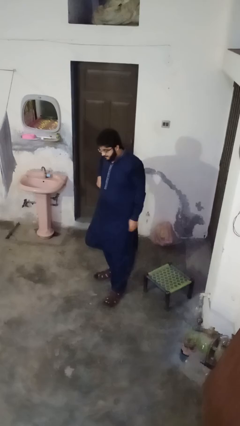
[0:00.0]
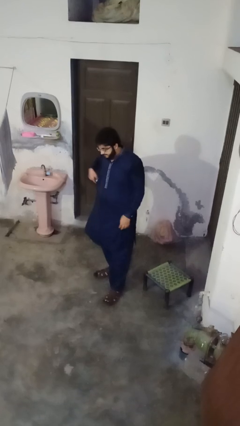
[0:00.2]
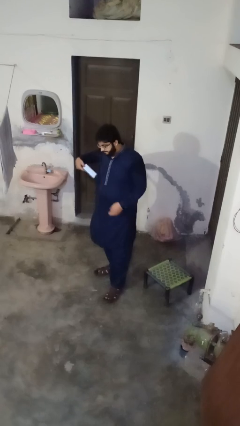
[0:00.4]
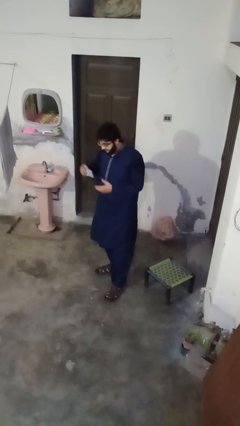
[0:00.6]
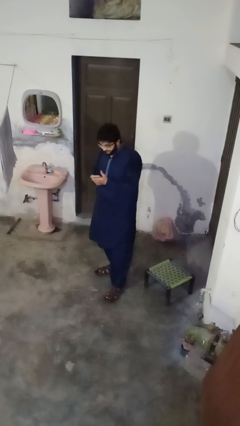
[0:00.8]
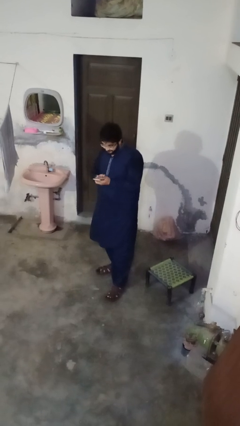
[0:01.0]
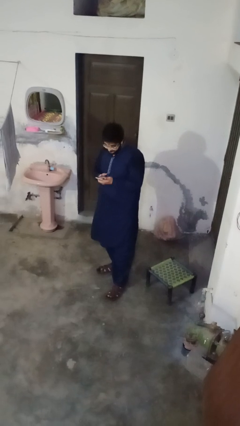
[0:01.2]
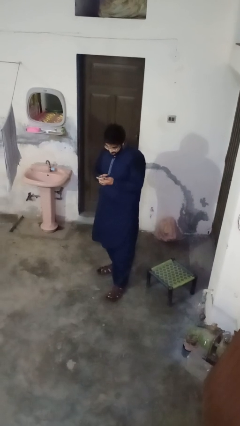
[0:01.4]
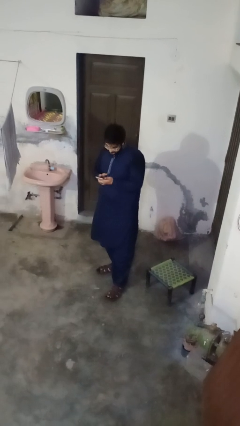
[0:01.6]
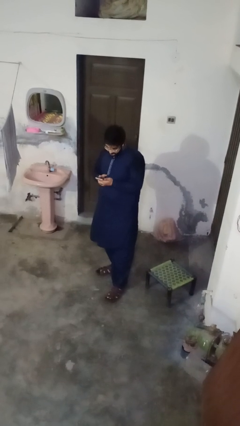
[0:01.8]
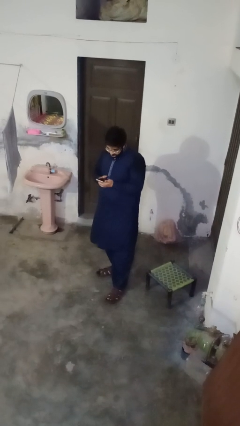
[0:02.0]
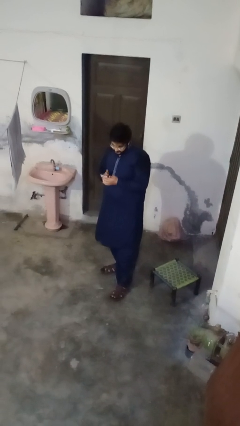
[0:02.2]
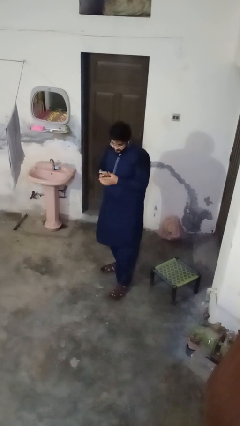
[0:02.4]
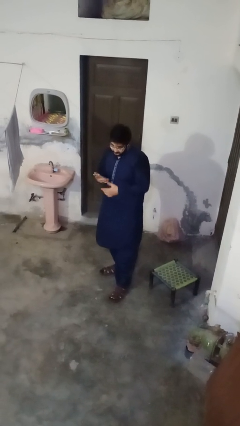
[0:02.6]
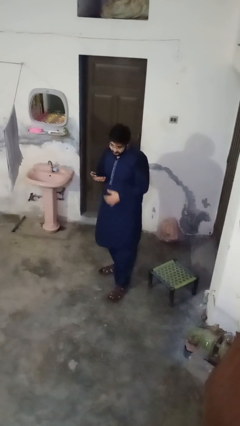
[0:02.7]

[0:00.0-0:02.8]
person takes phone from pocket

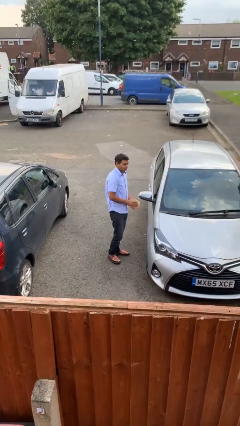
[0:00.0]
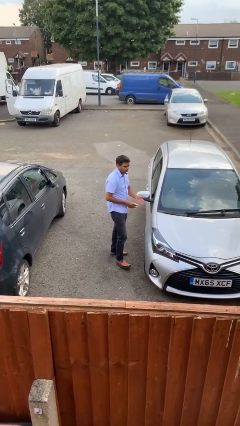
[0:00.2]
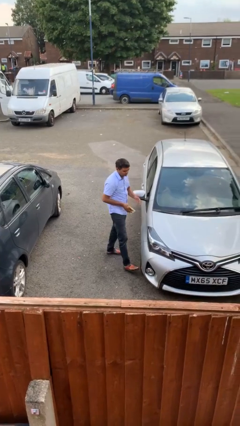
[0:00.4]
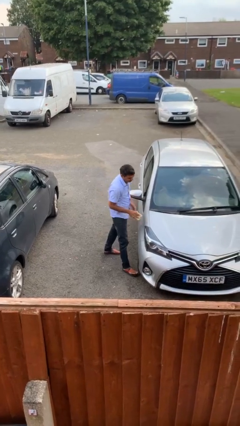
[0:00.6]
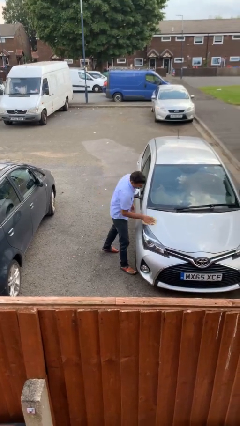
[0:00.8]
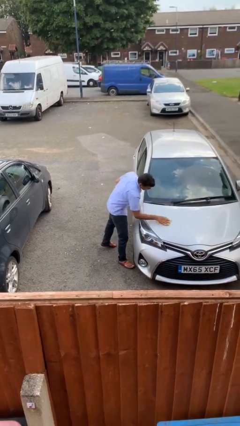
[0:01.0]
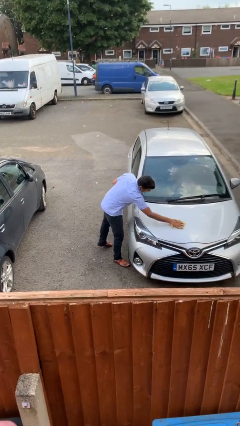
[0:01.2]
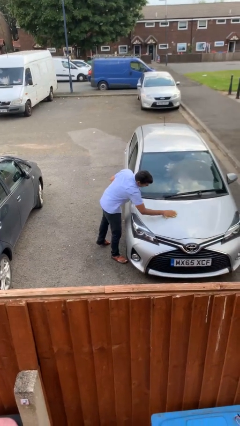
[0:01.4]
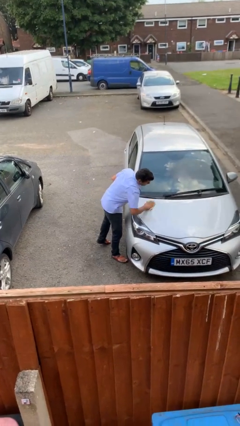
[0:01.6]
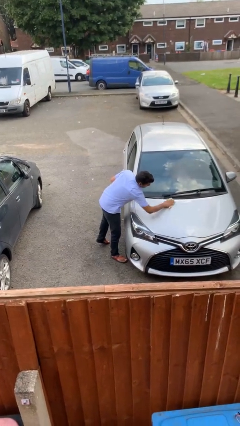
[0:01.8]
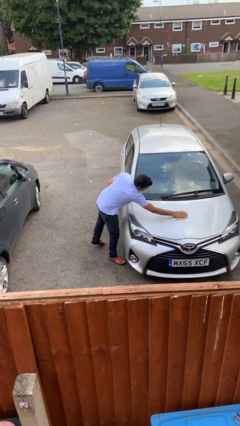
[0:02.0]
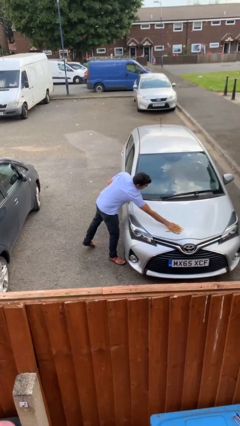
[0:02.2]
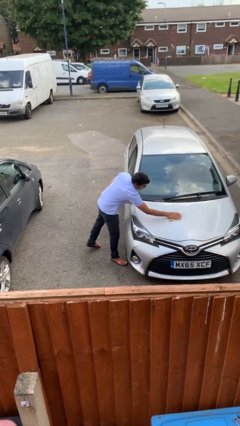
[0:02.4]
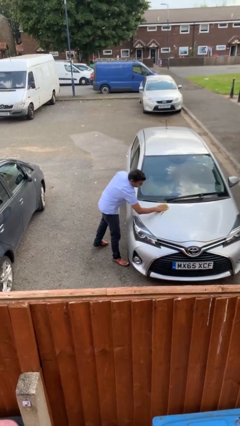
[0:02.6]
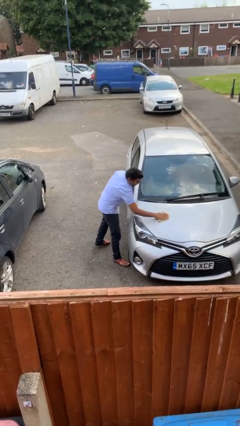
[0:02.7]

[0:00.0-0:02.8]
person polishes car with rag

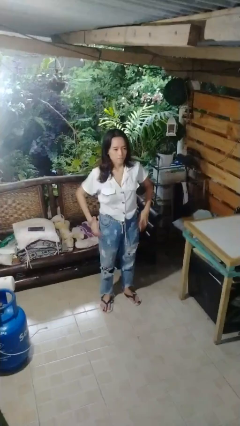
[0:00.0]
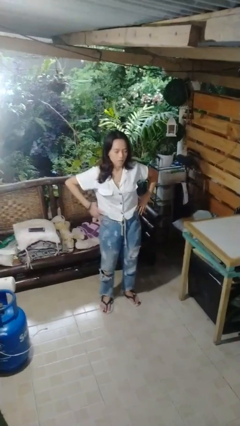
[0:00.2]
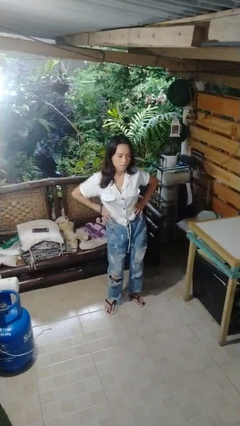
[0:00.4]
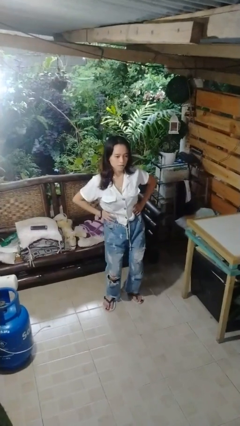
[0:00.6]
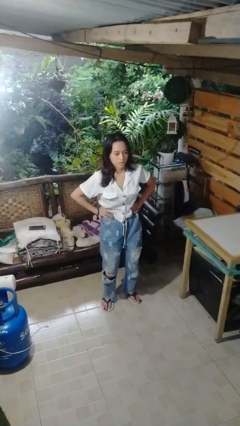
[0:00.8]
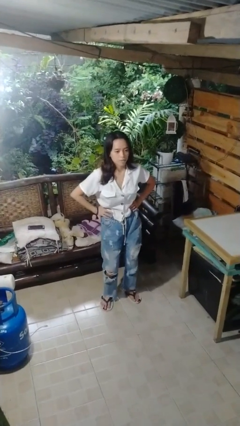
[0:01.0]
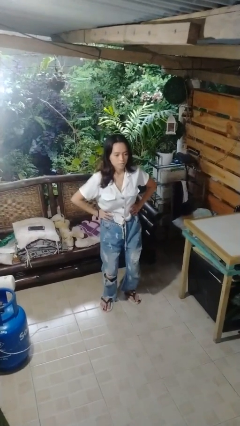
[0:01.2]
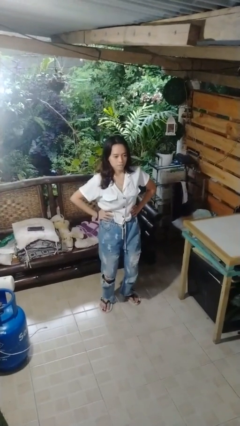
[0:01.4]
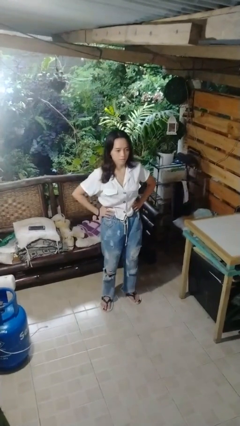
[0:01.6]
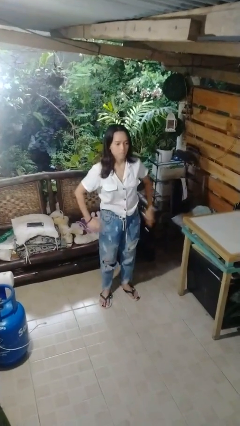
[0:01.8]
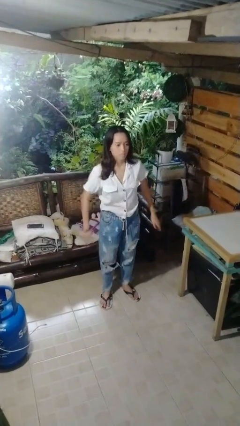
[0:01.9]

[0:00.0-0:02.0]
person wiggles hips

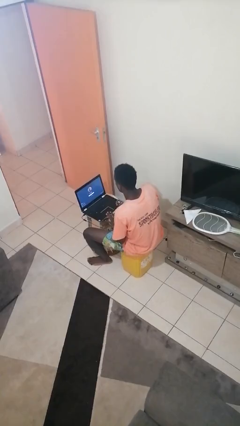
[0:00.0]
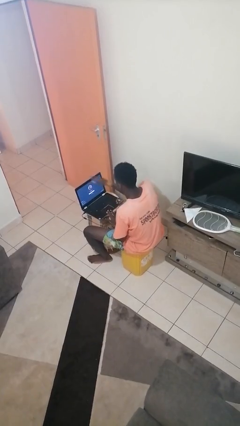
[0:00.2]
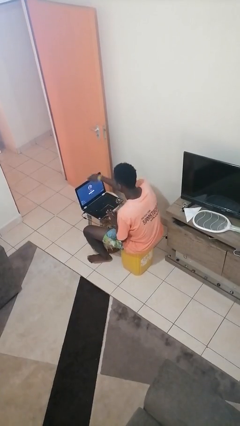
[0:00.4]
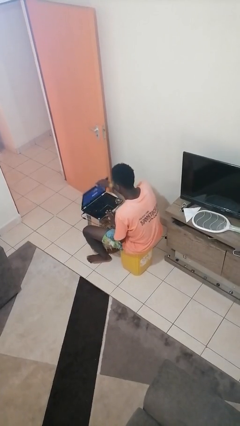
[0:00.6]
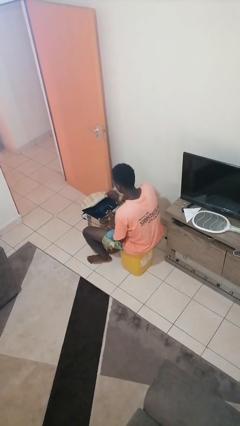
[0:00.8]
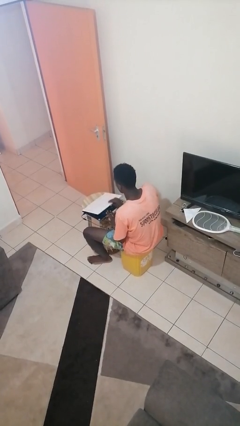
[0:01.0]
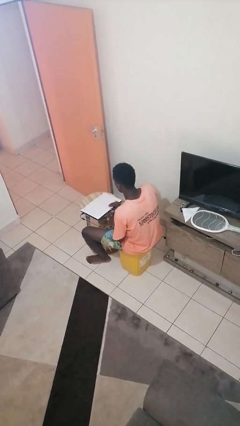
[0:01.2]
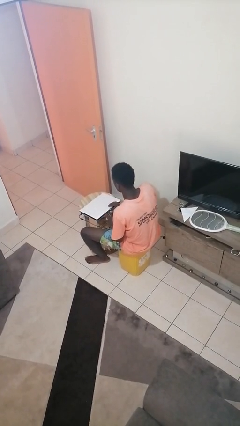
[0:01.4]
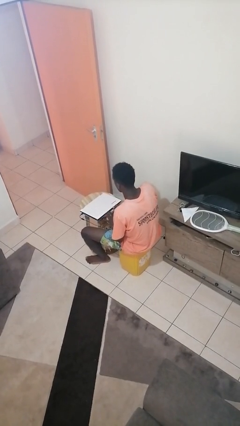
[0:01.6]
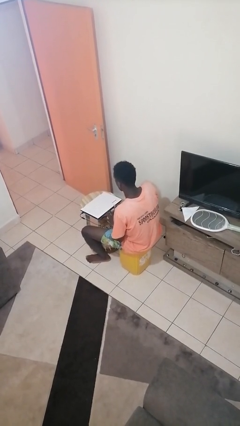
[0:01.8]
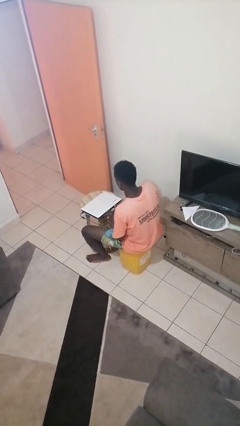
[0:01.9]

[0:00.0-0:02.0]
person closes laptop

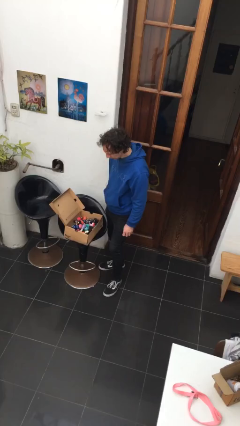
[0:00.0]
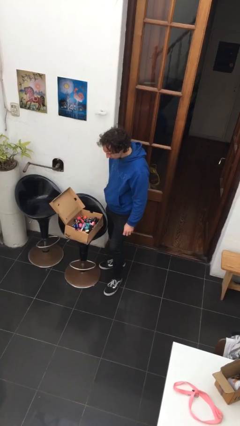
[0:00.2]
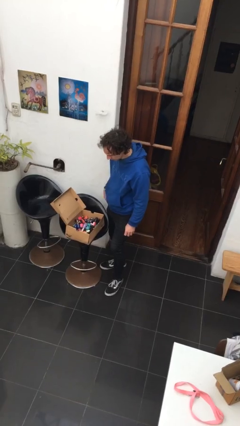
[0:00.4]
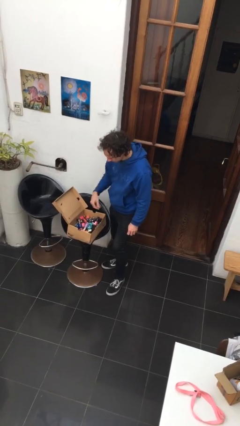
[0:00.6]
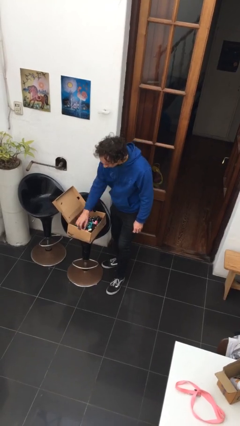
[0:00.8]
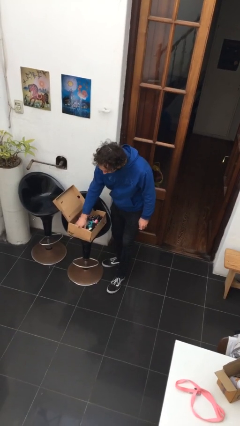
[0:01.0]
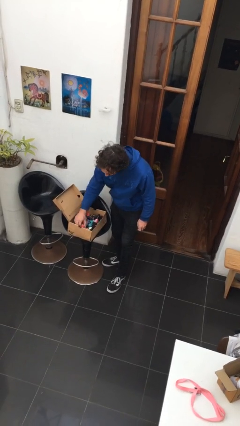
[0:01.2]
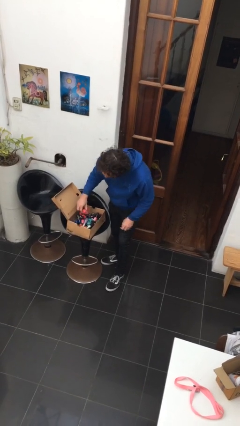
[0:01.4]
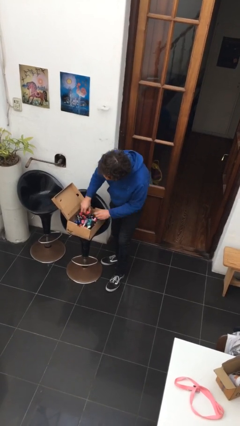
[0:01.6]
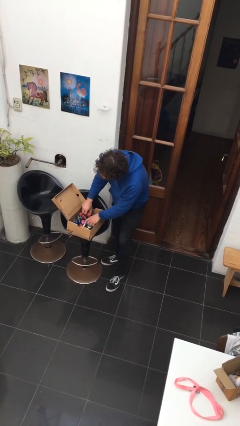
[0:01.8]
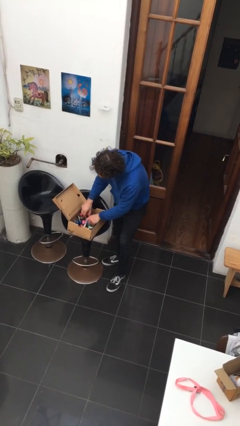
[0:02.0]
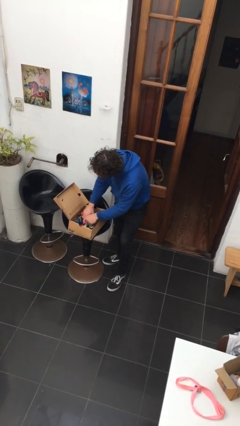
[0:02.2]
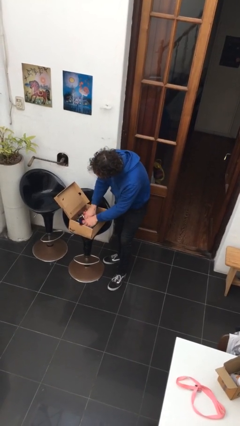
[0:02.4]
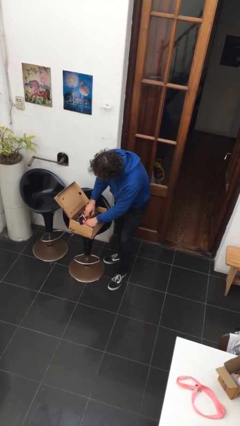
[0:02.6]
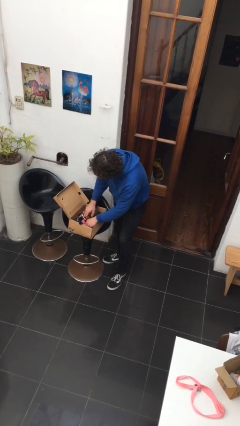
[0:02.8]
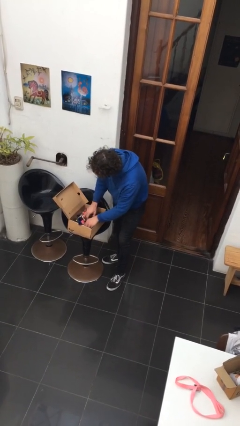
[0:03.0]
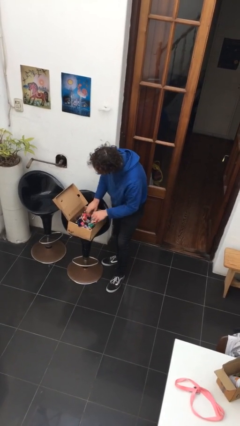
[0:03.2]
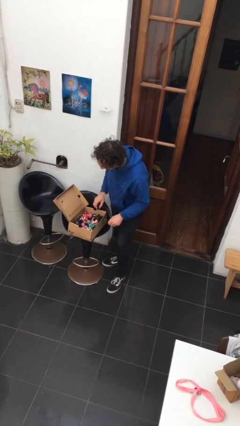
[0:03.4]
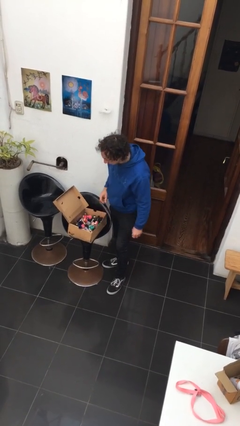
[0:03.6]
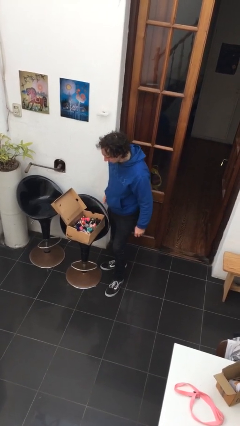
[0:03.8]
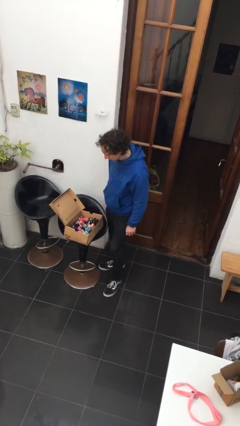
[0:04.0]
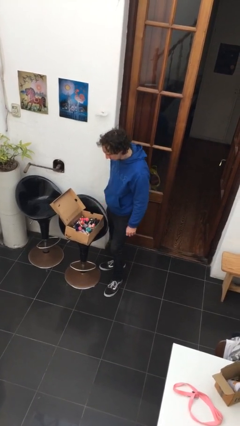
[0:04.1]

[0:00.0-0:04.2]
person searches in box

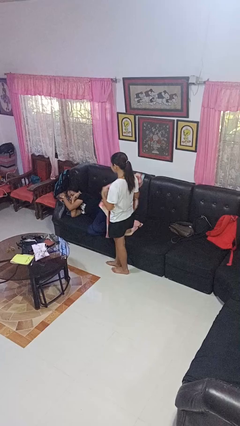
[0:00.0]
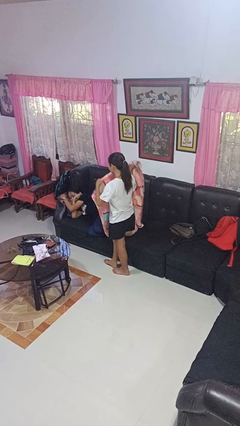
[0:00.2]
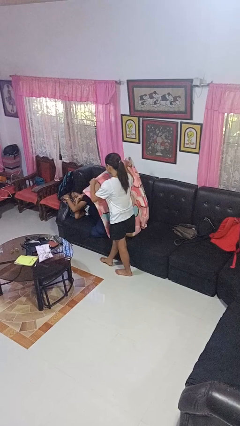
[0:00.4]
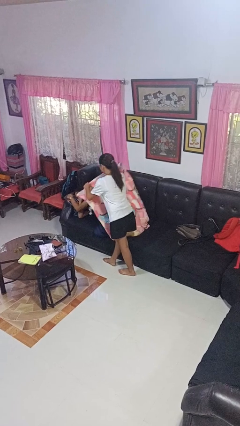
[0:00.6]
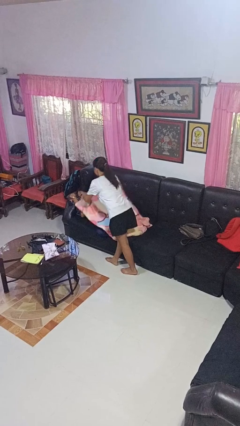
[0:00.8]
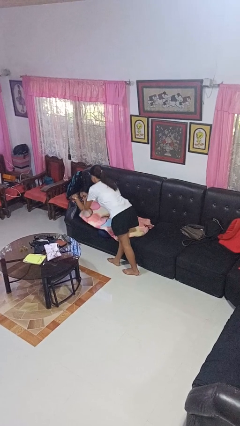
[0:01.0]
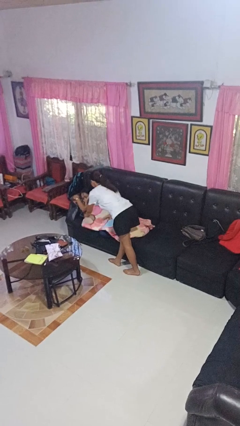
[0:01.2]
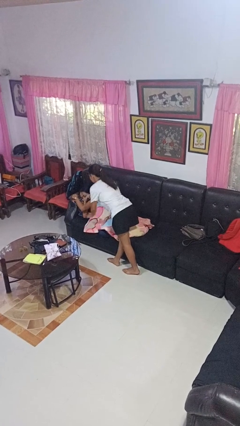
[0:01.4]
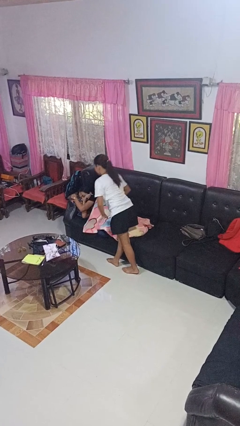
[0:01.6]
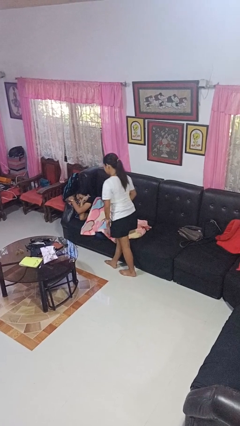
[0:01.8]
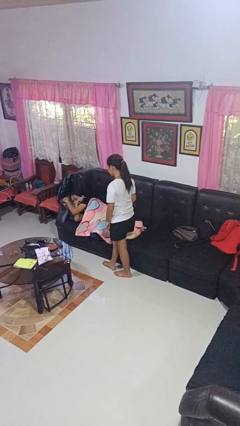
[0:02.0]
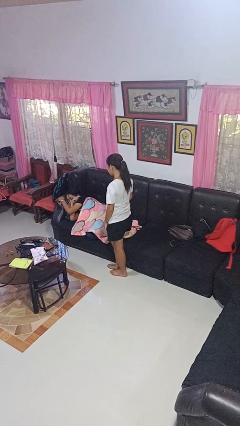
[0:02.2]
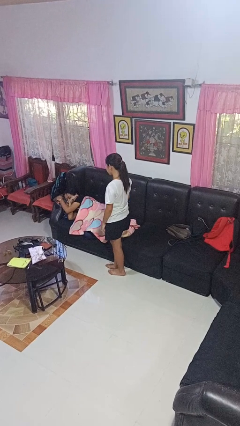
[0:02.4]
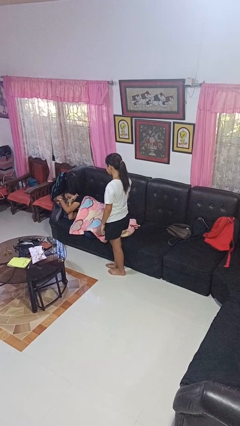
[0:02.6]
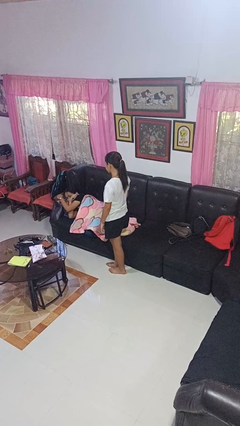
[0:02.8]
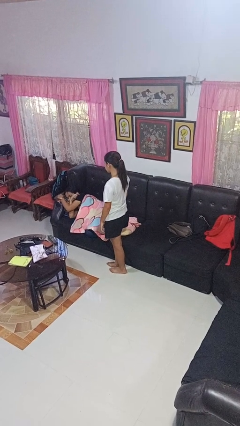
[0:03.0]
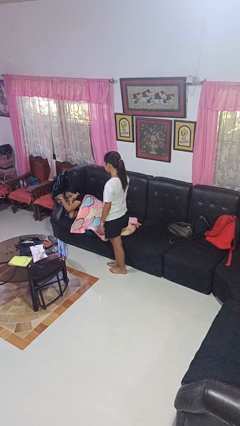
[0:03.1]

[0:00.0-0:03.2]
person covers friend with blanket

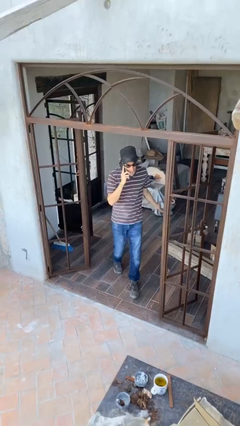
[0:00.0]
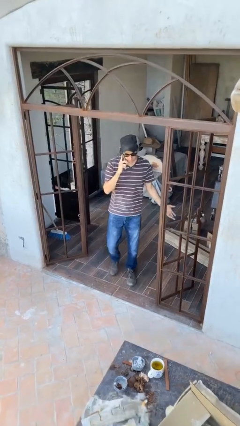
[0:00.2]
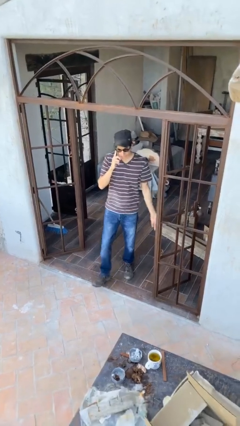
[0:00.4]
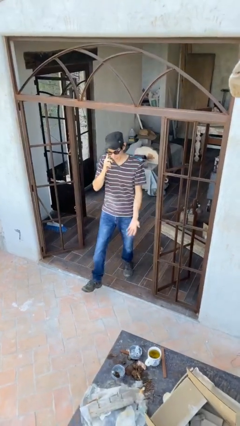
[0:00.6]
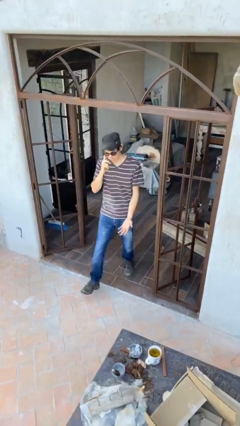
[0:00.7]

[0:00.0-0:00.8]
person enters scene through structure
